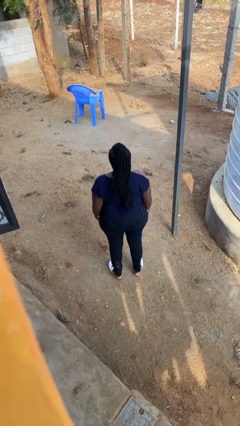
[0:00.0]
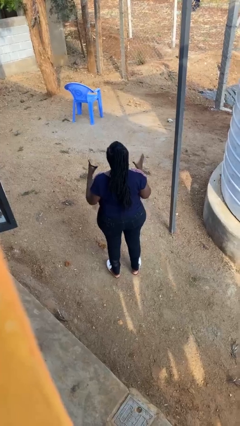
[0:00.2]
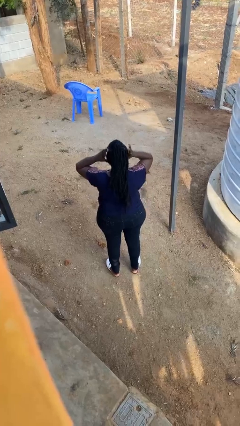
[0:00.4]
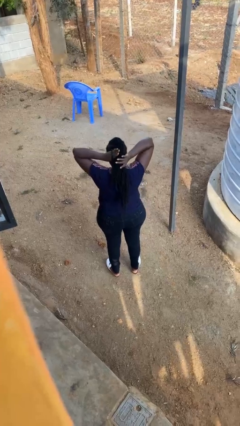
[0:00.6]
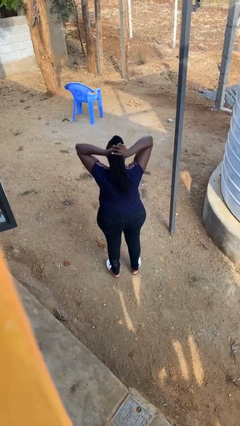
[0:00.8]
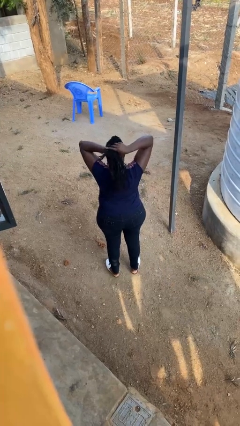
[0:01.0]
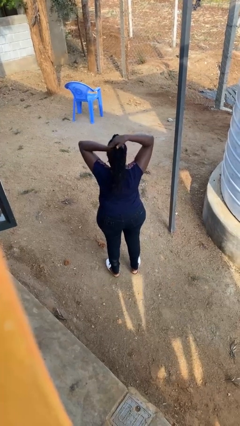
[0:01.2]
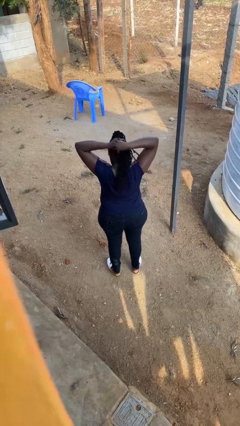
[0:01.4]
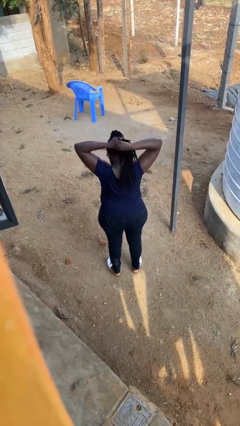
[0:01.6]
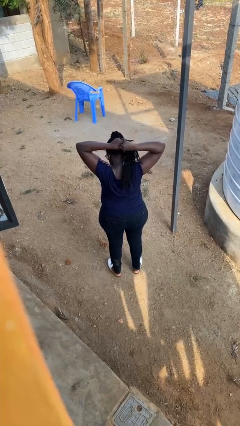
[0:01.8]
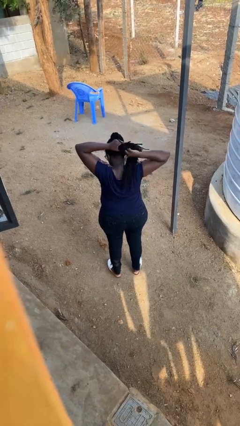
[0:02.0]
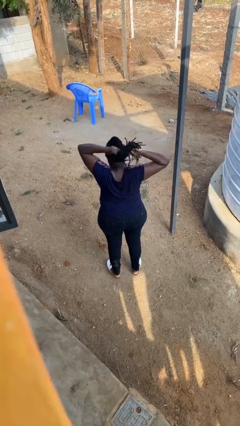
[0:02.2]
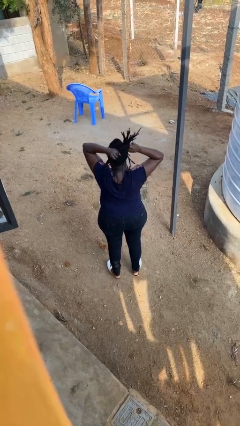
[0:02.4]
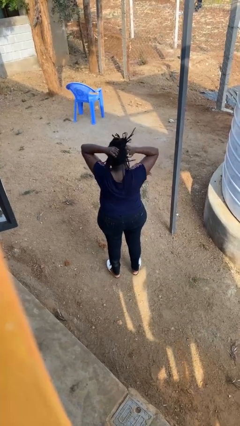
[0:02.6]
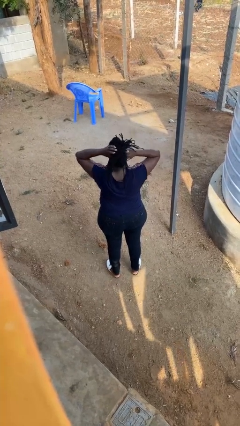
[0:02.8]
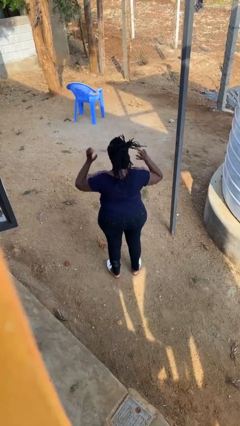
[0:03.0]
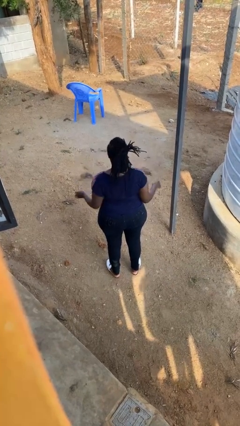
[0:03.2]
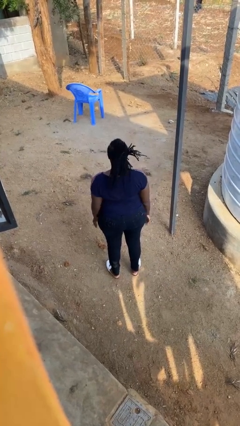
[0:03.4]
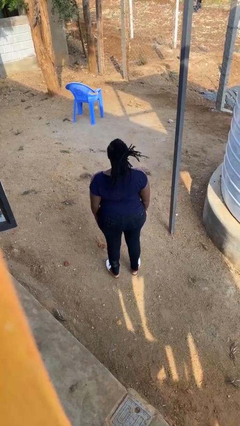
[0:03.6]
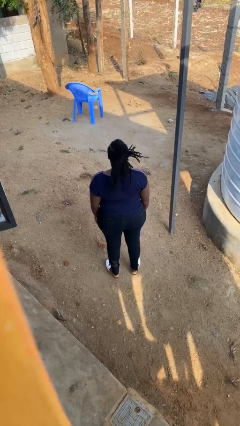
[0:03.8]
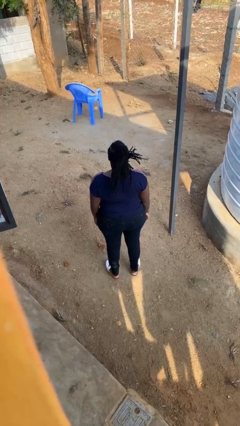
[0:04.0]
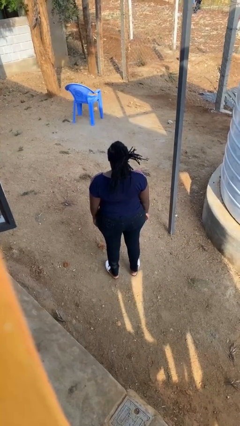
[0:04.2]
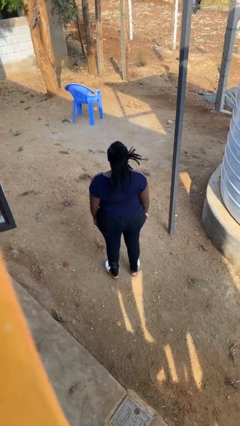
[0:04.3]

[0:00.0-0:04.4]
person puts hair in ponytail

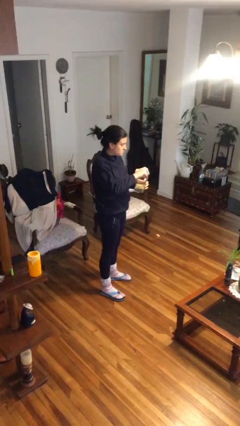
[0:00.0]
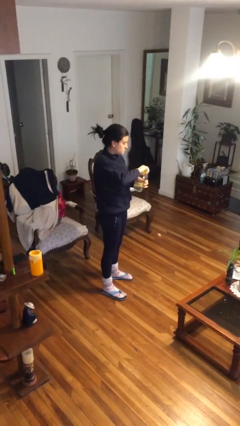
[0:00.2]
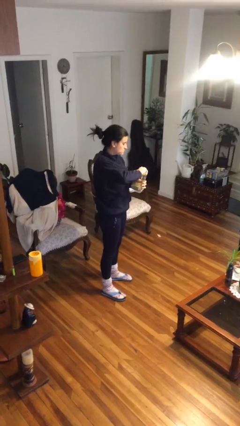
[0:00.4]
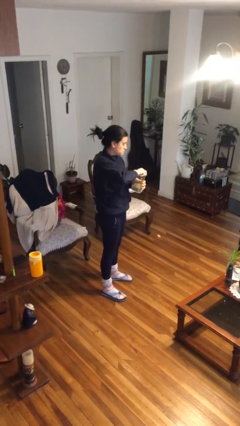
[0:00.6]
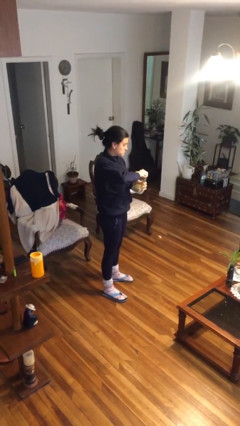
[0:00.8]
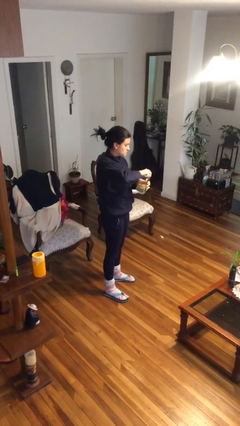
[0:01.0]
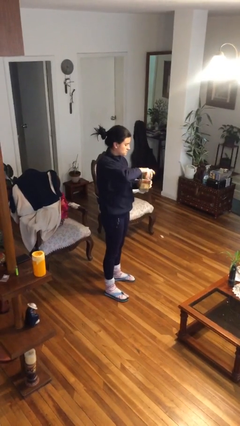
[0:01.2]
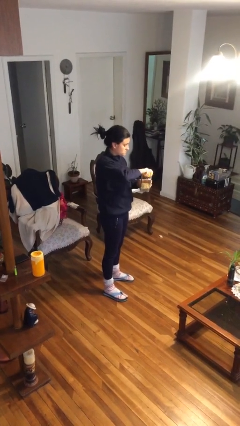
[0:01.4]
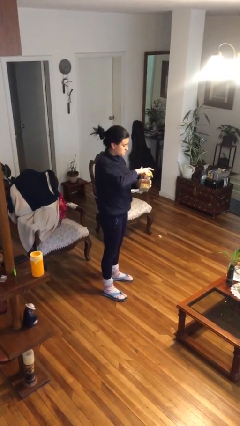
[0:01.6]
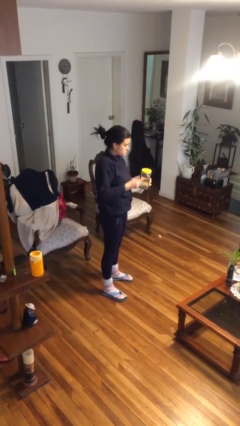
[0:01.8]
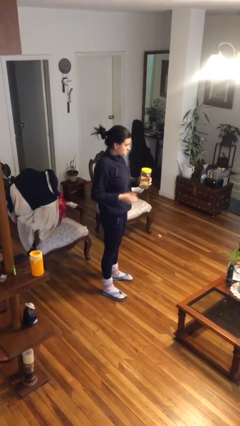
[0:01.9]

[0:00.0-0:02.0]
person closes jar

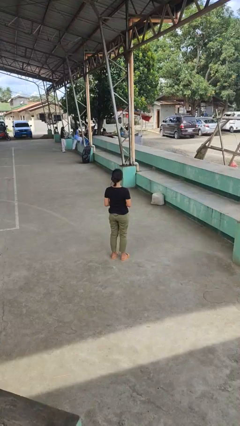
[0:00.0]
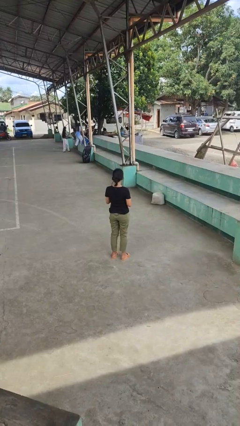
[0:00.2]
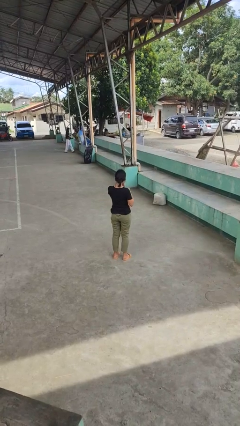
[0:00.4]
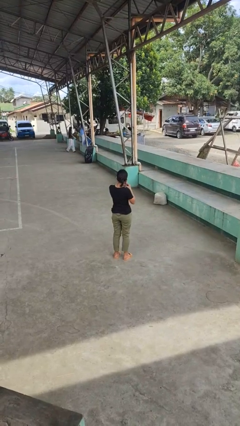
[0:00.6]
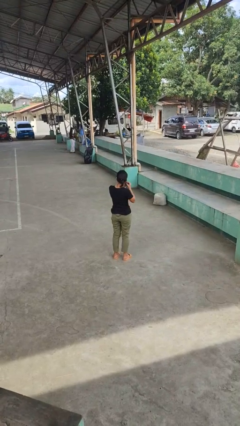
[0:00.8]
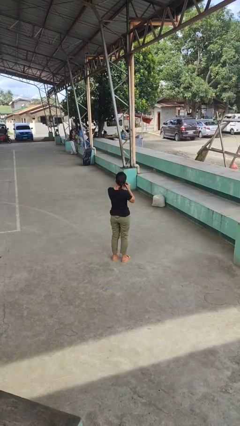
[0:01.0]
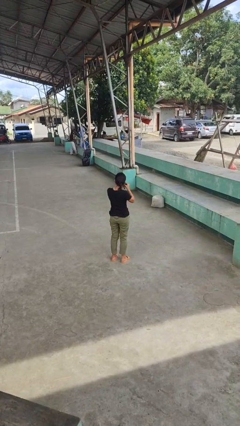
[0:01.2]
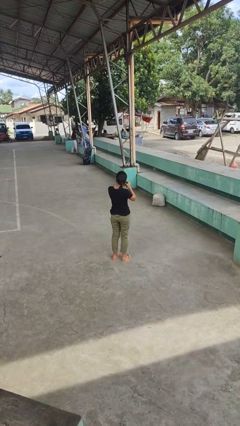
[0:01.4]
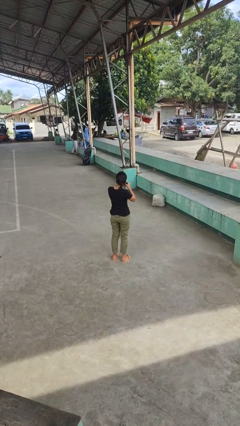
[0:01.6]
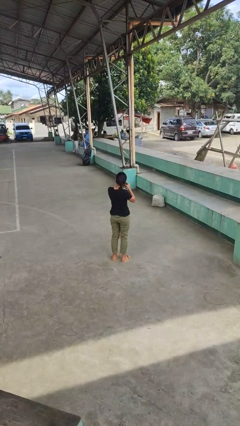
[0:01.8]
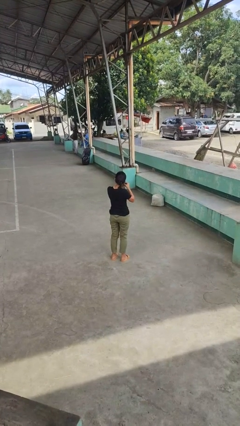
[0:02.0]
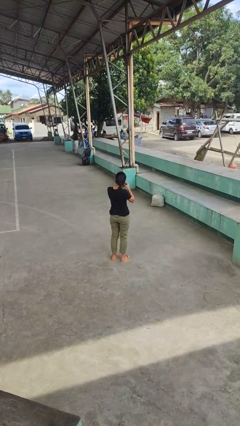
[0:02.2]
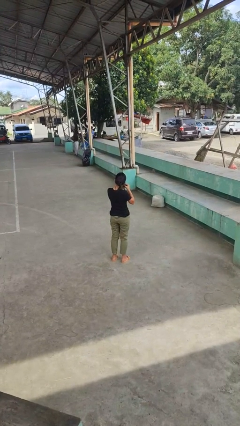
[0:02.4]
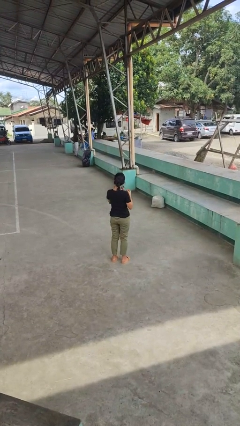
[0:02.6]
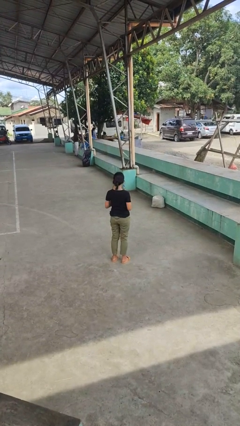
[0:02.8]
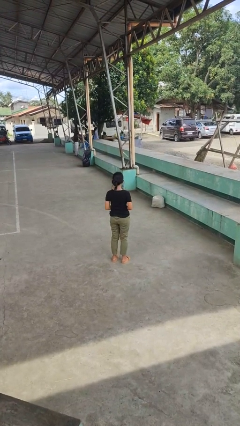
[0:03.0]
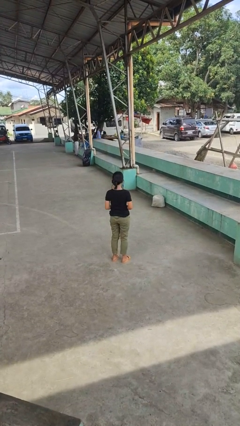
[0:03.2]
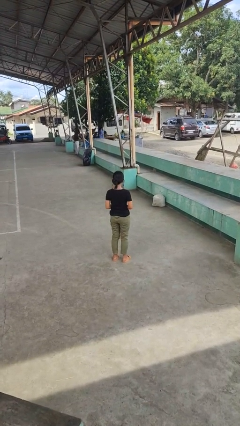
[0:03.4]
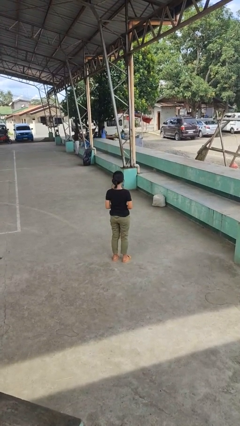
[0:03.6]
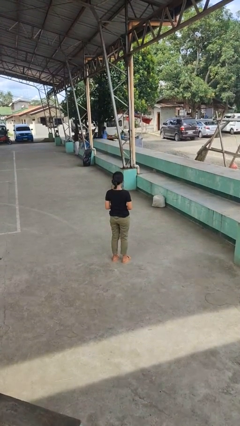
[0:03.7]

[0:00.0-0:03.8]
person puts on earrings

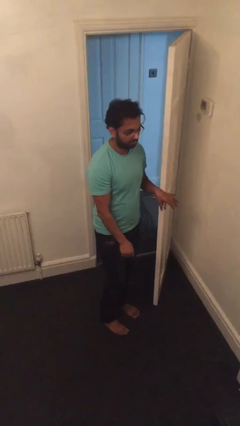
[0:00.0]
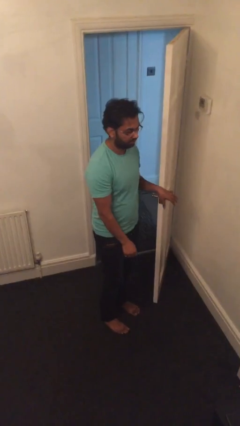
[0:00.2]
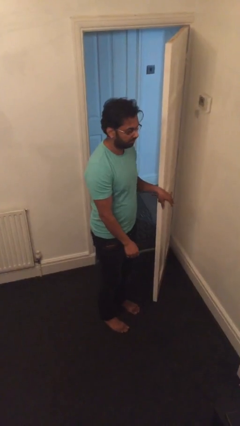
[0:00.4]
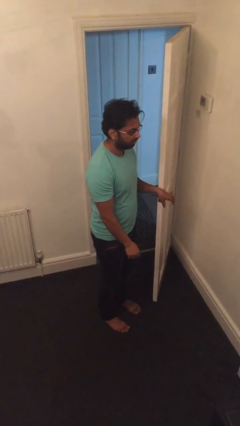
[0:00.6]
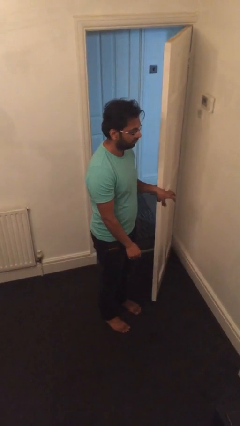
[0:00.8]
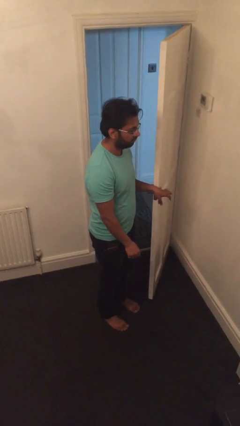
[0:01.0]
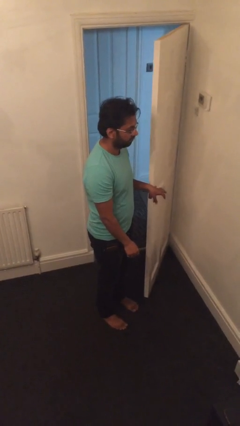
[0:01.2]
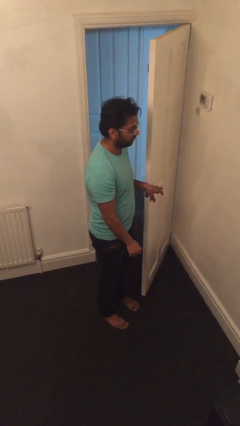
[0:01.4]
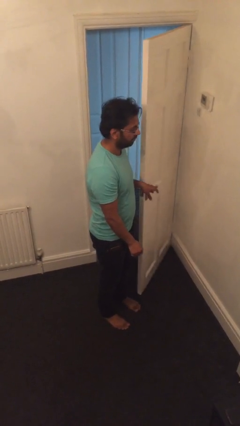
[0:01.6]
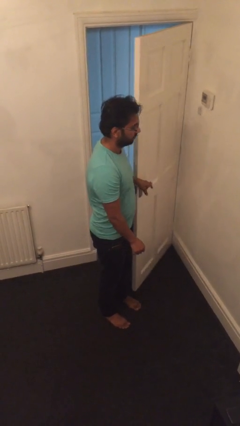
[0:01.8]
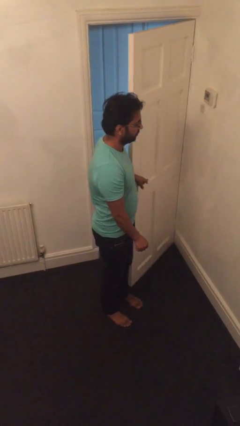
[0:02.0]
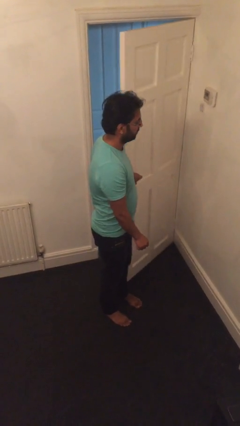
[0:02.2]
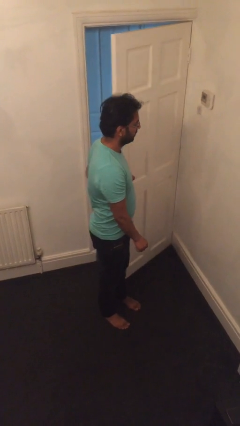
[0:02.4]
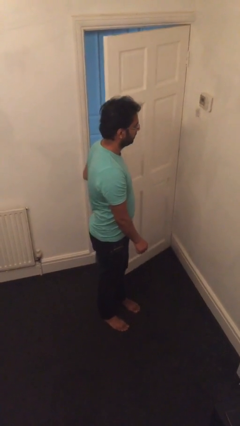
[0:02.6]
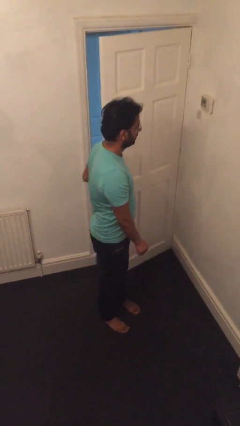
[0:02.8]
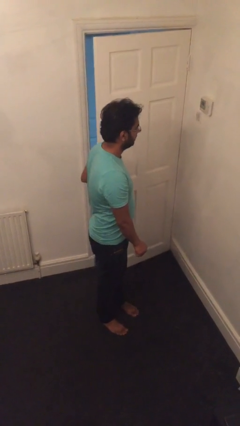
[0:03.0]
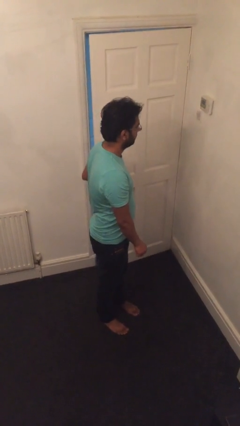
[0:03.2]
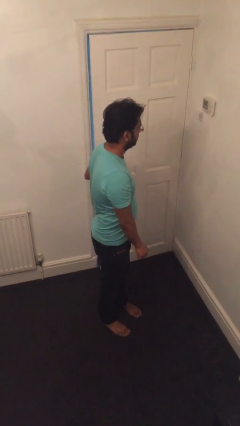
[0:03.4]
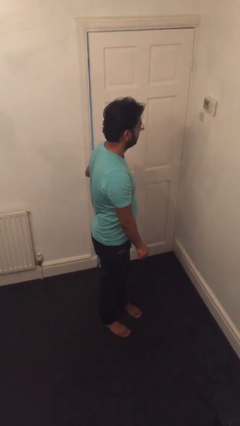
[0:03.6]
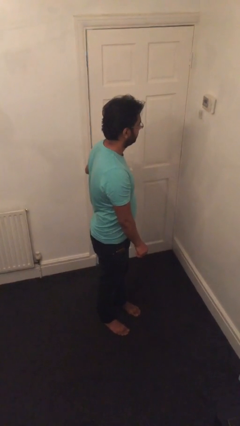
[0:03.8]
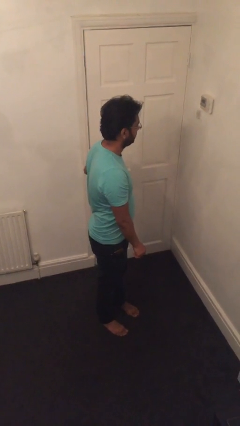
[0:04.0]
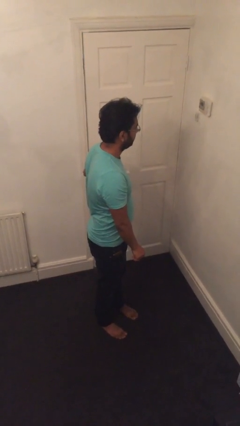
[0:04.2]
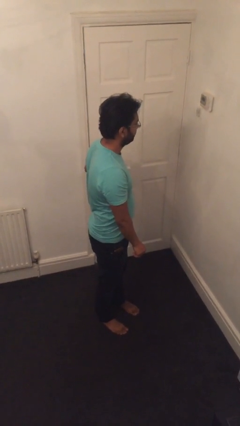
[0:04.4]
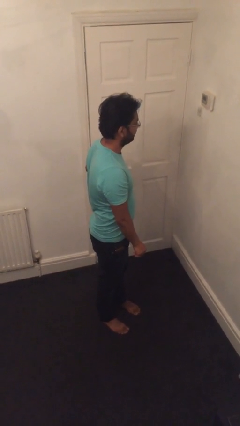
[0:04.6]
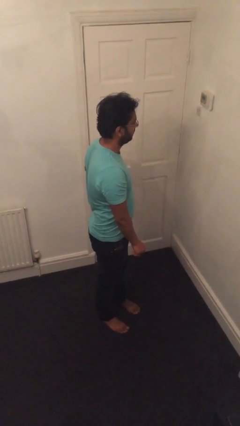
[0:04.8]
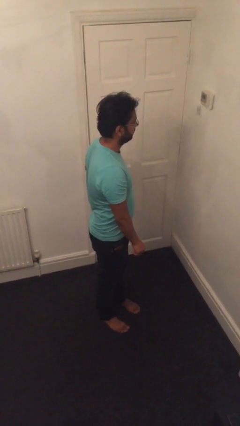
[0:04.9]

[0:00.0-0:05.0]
person closes facility door

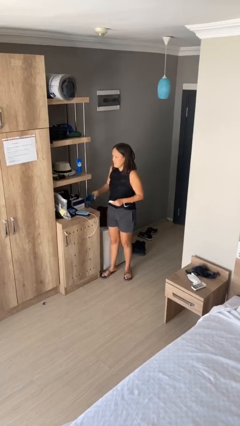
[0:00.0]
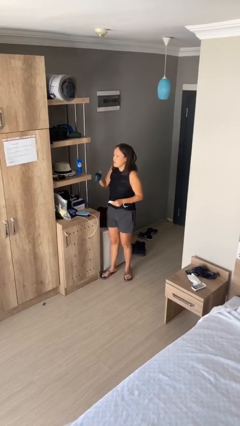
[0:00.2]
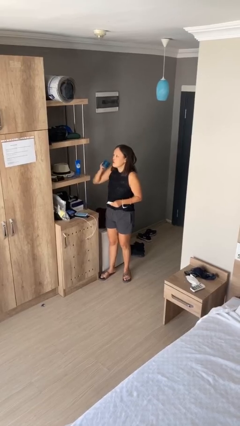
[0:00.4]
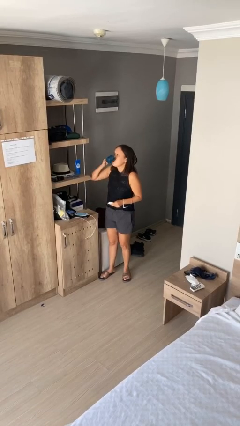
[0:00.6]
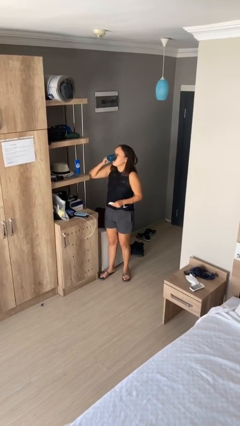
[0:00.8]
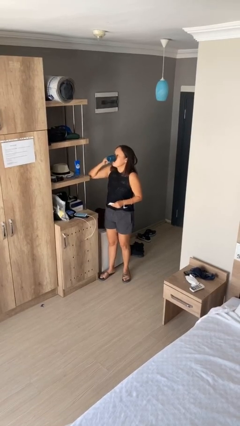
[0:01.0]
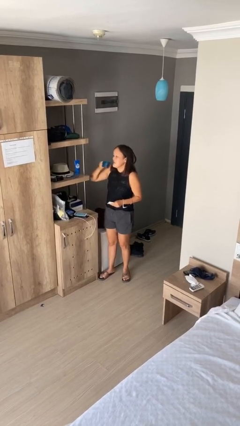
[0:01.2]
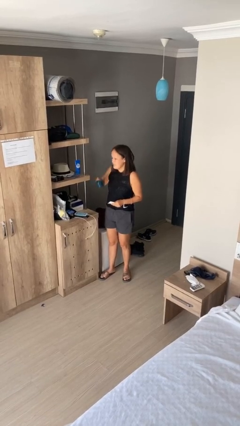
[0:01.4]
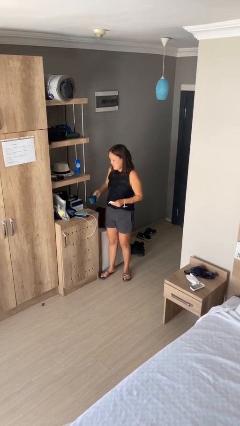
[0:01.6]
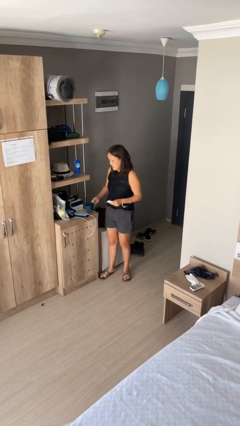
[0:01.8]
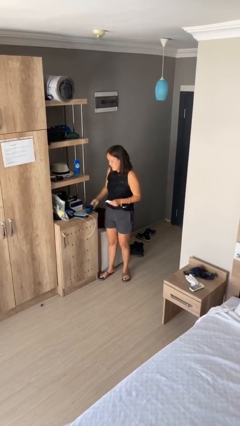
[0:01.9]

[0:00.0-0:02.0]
person drinks from cup

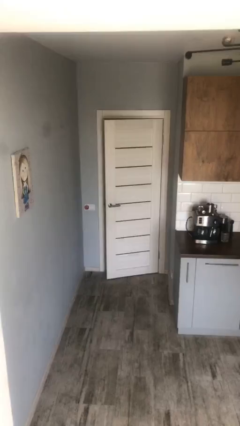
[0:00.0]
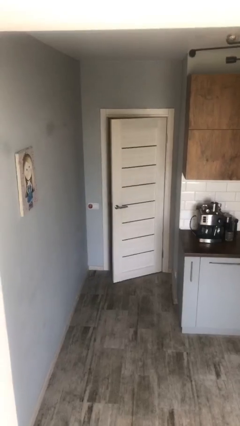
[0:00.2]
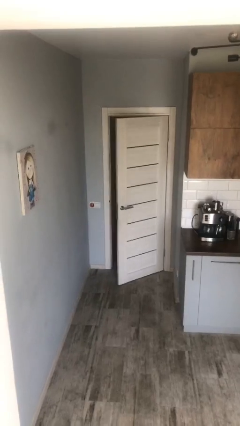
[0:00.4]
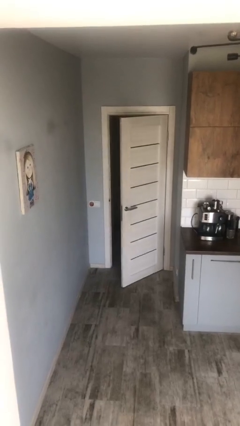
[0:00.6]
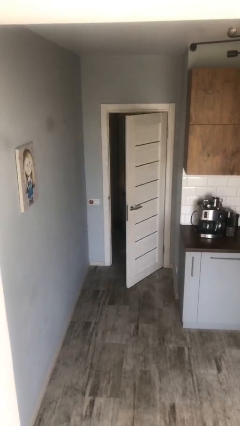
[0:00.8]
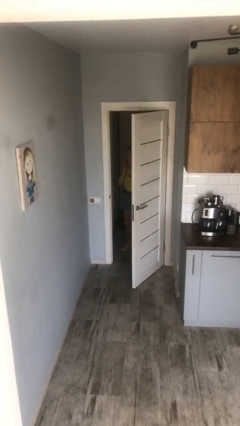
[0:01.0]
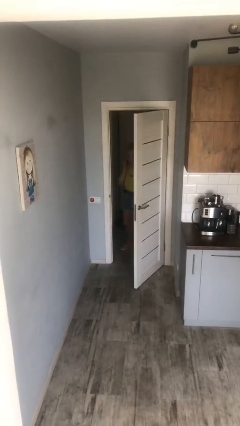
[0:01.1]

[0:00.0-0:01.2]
person opens facility door
